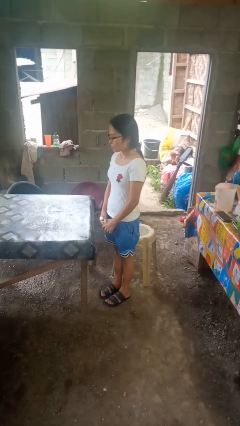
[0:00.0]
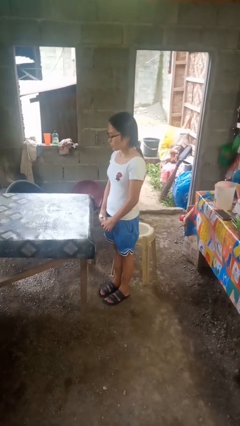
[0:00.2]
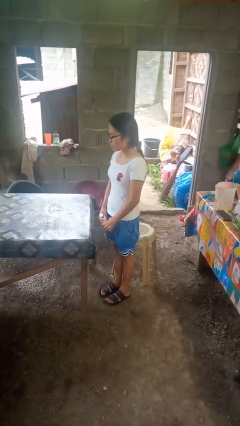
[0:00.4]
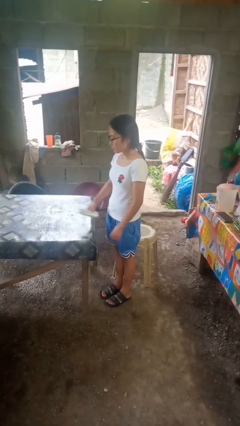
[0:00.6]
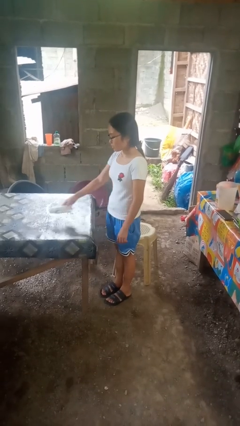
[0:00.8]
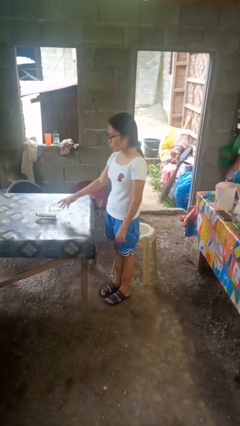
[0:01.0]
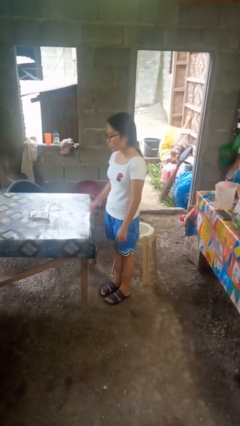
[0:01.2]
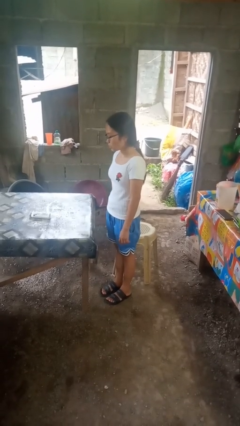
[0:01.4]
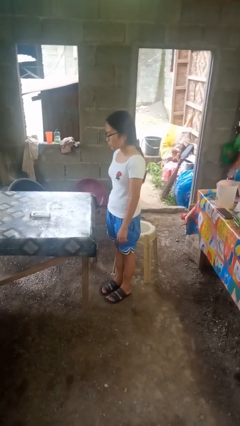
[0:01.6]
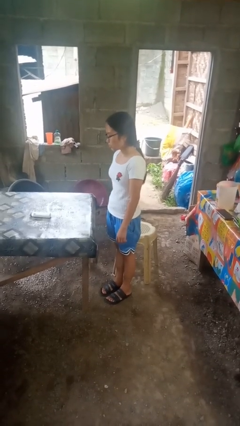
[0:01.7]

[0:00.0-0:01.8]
person throws object on table

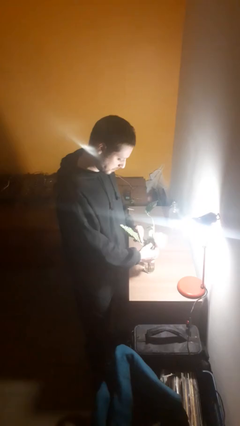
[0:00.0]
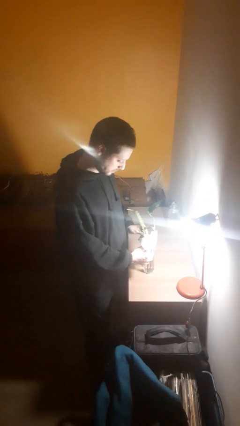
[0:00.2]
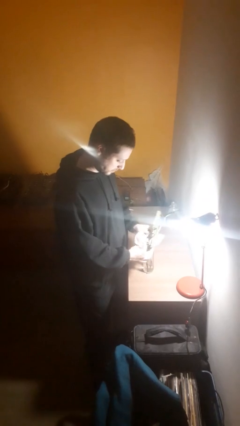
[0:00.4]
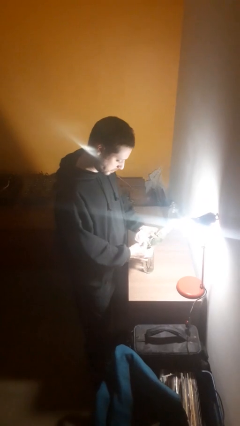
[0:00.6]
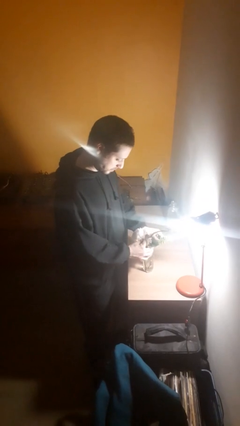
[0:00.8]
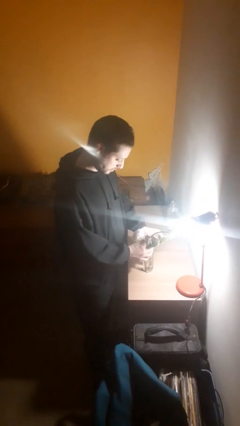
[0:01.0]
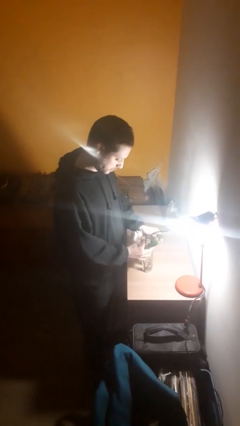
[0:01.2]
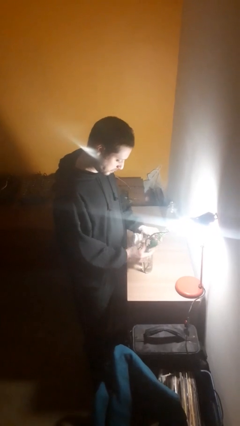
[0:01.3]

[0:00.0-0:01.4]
person arranges flowers in vase

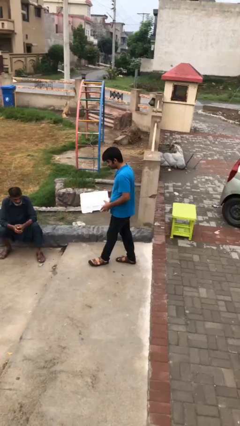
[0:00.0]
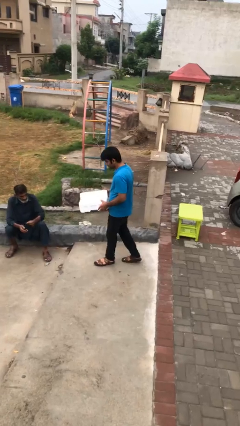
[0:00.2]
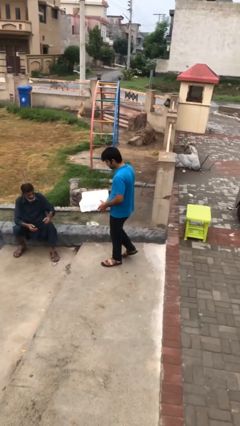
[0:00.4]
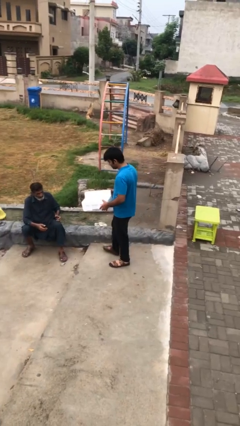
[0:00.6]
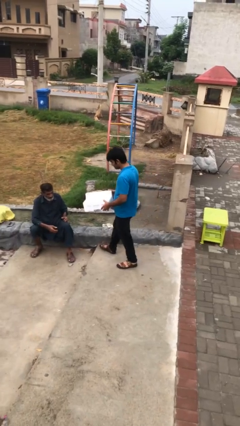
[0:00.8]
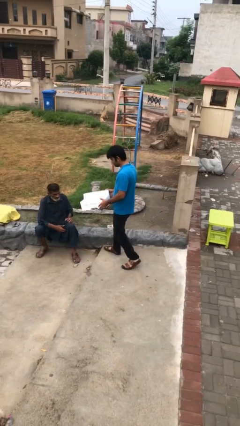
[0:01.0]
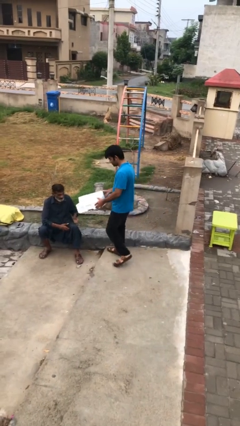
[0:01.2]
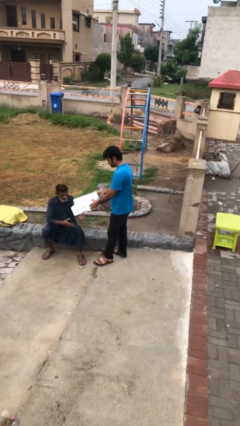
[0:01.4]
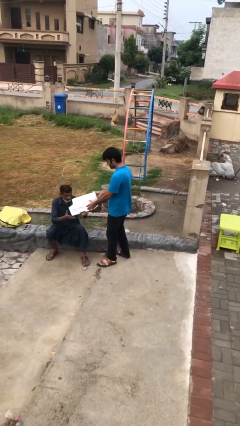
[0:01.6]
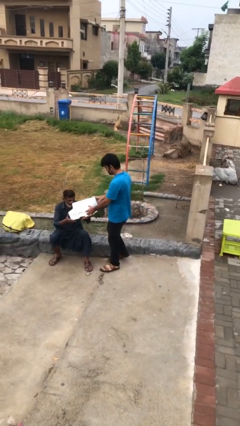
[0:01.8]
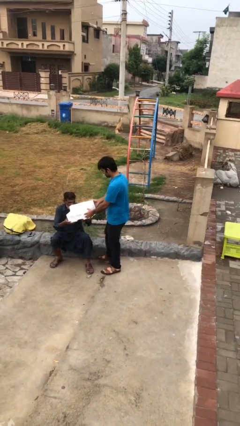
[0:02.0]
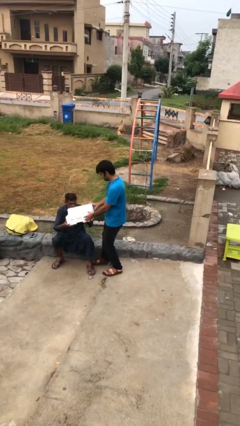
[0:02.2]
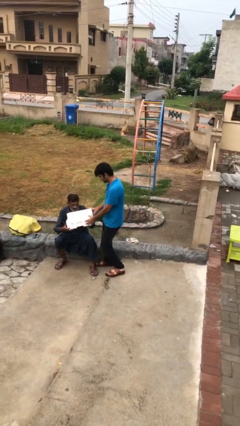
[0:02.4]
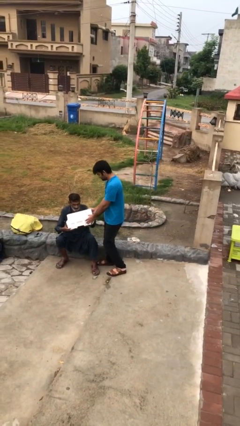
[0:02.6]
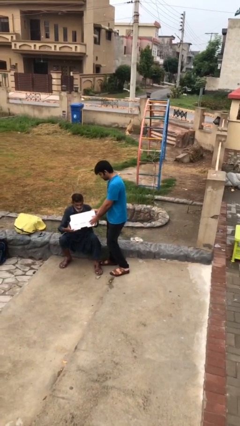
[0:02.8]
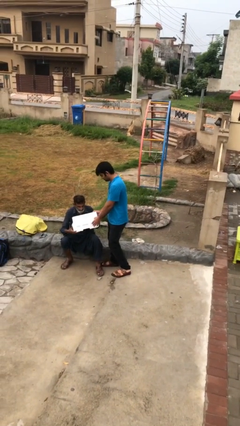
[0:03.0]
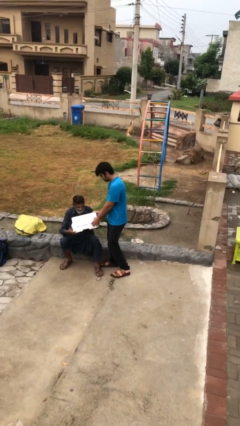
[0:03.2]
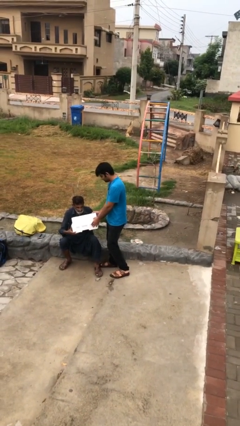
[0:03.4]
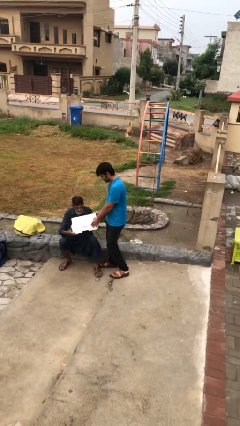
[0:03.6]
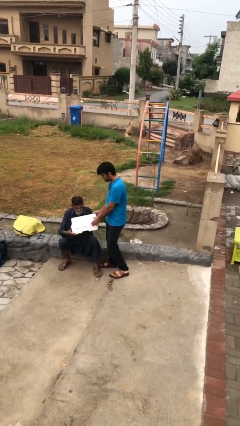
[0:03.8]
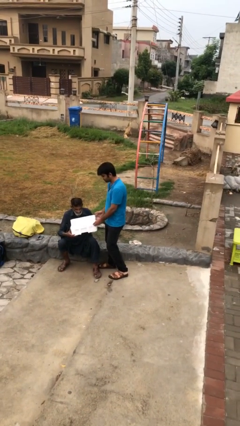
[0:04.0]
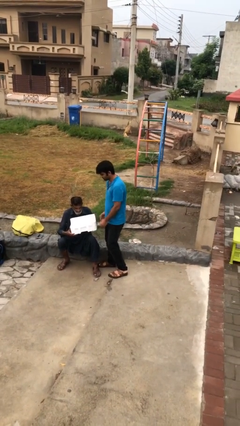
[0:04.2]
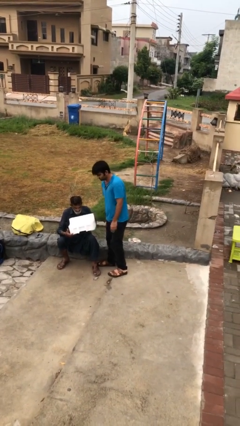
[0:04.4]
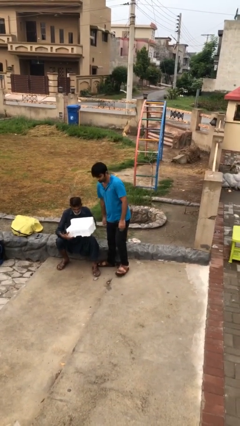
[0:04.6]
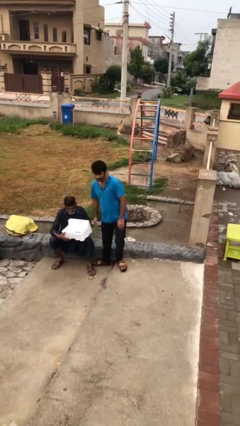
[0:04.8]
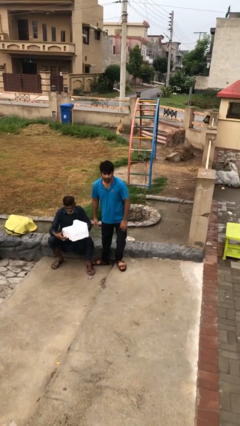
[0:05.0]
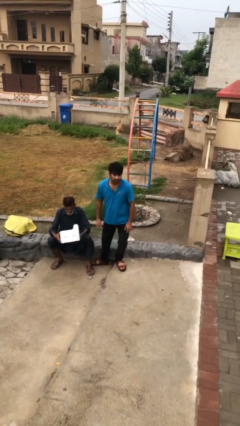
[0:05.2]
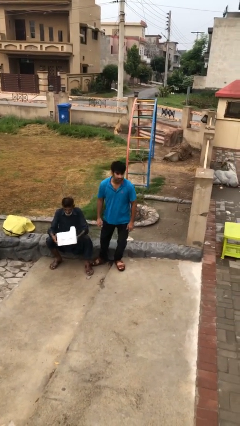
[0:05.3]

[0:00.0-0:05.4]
person transfers object to person

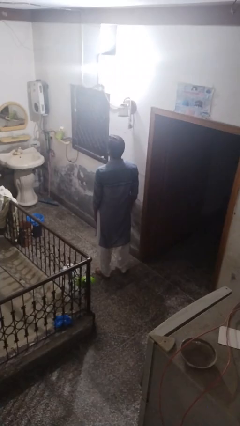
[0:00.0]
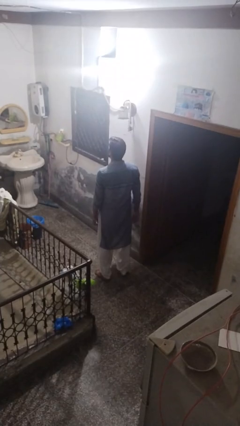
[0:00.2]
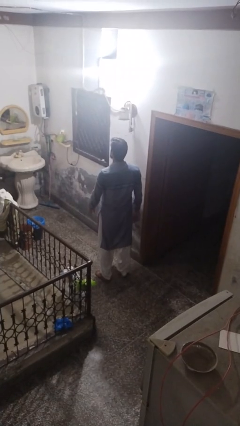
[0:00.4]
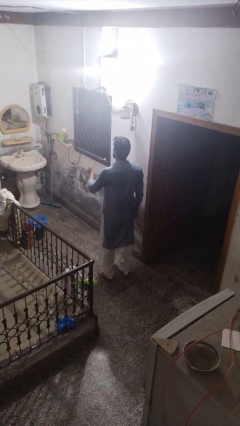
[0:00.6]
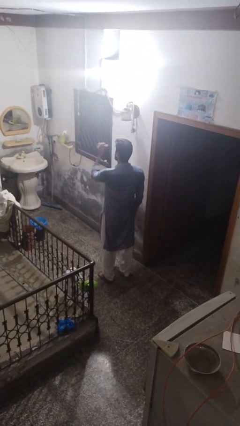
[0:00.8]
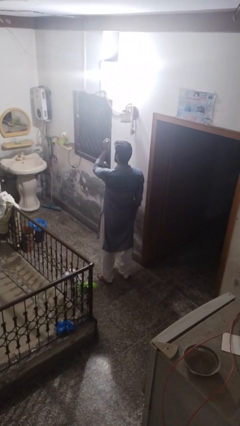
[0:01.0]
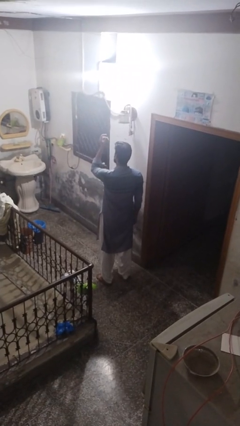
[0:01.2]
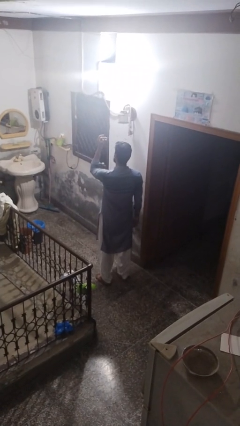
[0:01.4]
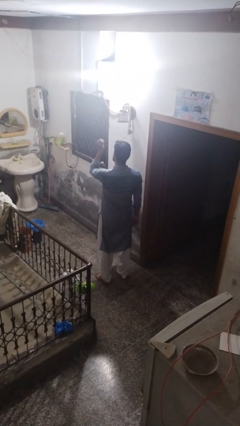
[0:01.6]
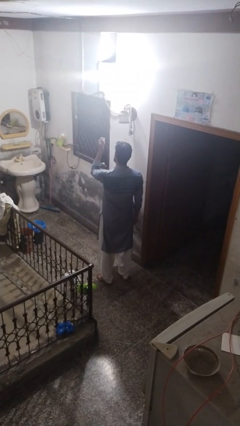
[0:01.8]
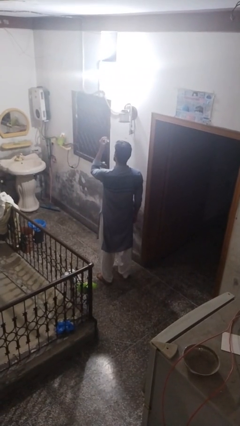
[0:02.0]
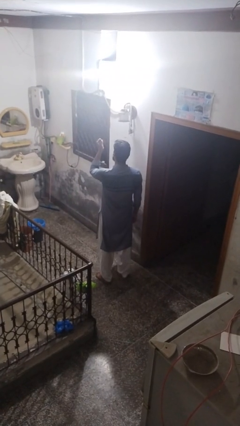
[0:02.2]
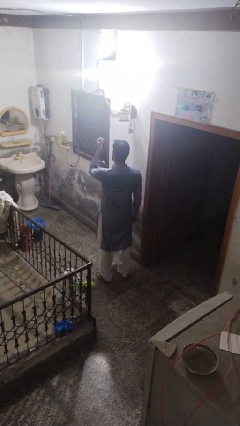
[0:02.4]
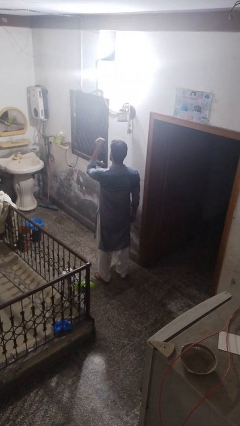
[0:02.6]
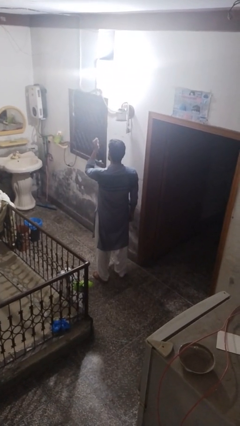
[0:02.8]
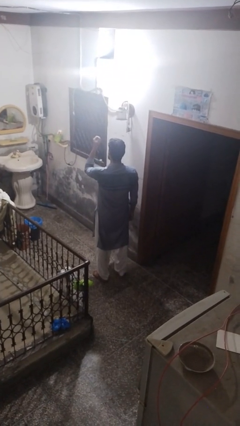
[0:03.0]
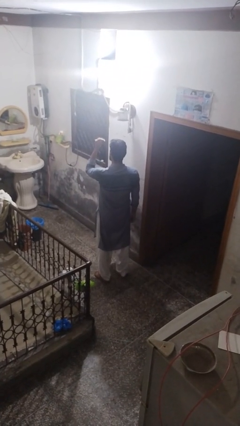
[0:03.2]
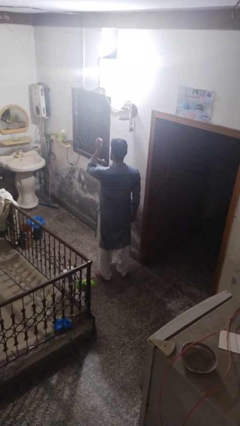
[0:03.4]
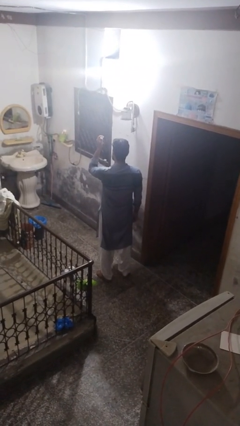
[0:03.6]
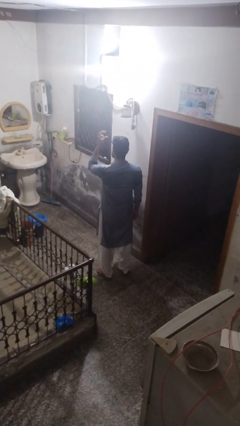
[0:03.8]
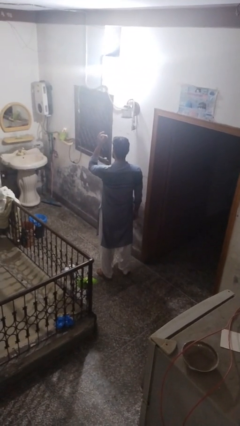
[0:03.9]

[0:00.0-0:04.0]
person snaps fingers

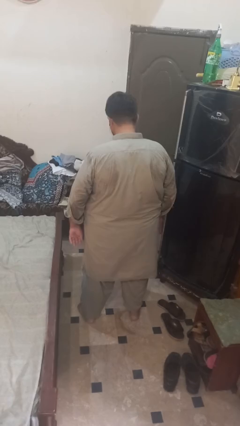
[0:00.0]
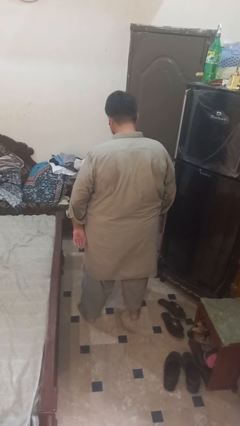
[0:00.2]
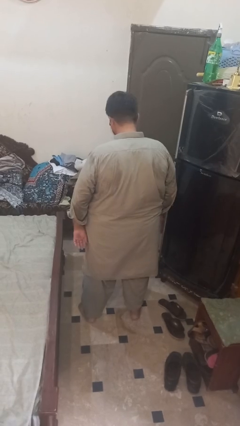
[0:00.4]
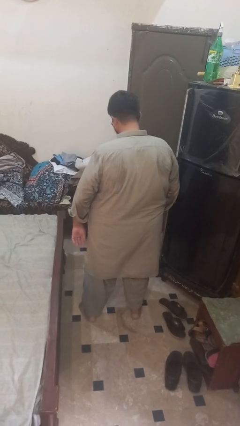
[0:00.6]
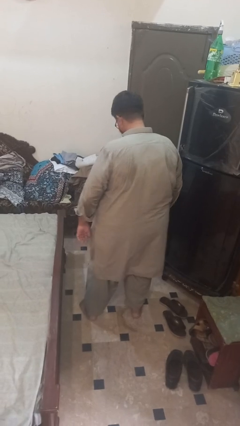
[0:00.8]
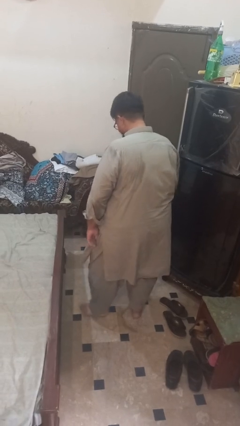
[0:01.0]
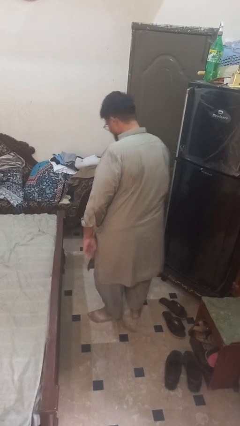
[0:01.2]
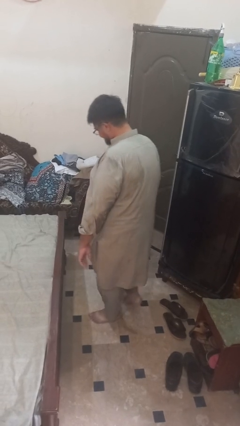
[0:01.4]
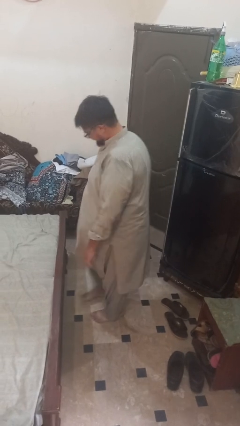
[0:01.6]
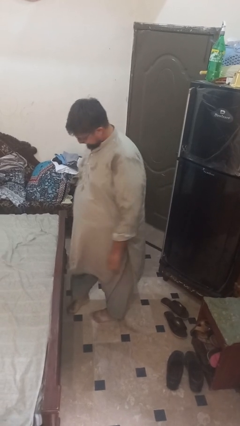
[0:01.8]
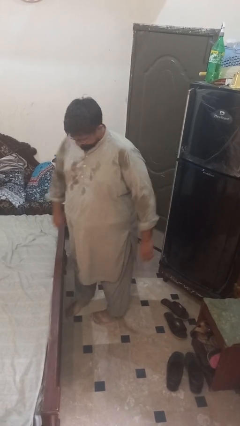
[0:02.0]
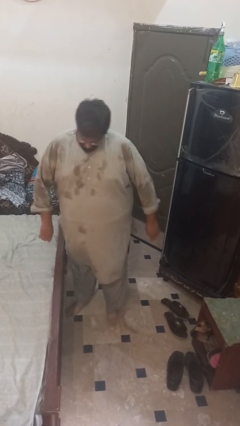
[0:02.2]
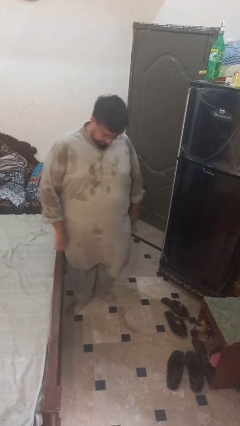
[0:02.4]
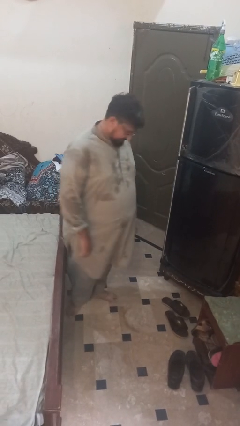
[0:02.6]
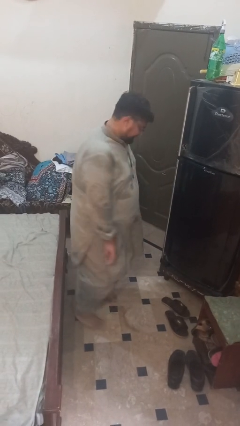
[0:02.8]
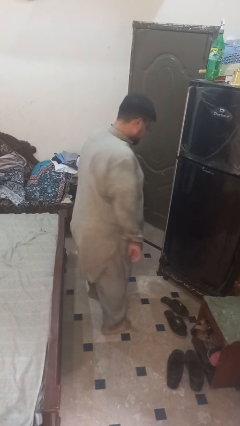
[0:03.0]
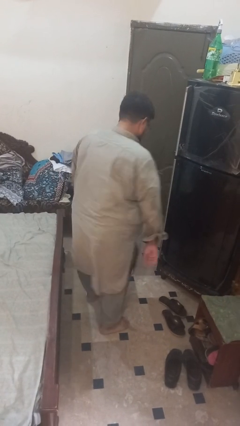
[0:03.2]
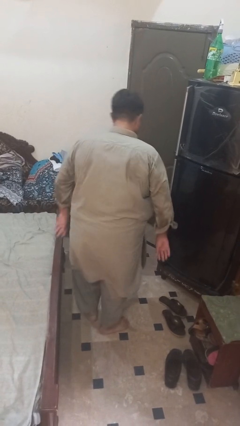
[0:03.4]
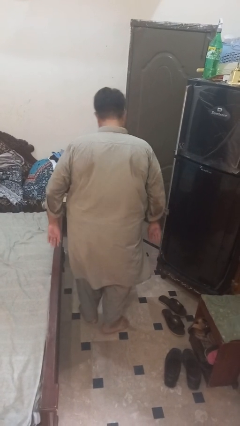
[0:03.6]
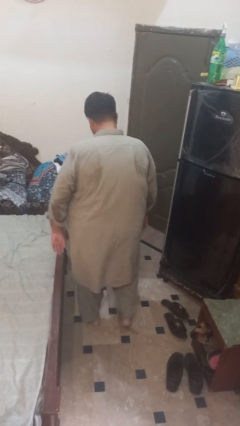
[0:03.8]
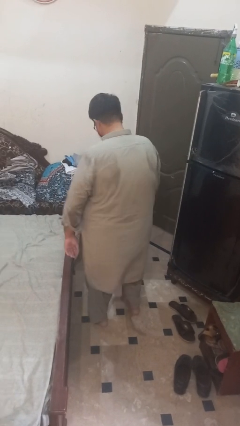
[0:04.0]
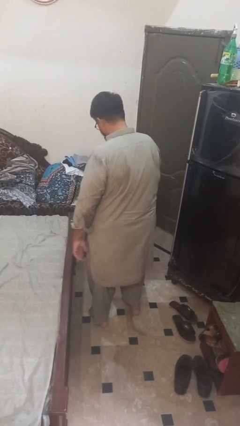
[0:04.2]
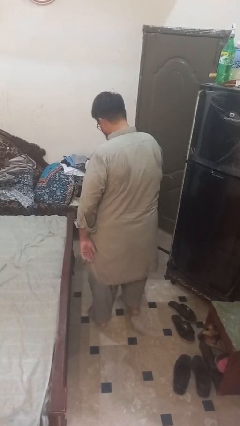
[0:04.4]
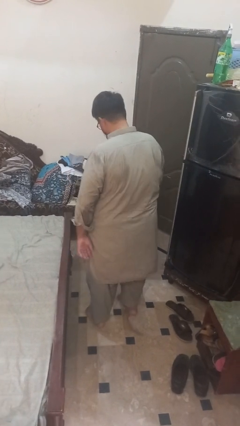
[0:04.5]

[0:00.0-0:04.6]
person twirls

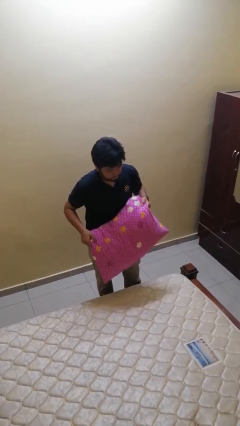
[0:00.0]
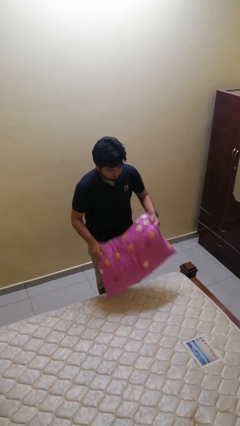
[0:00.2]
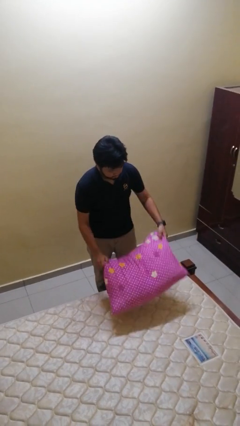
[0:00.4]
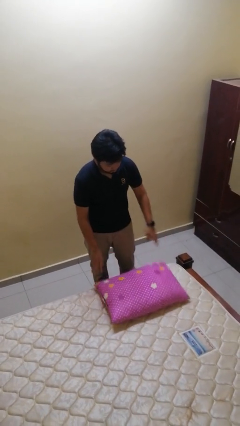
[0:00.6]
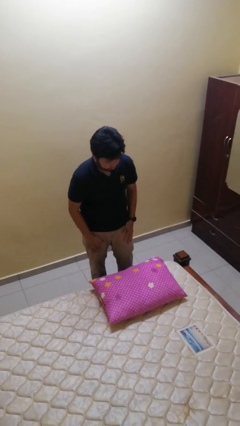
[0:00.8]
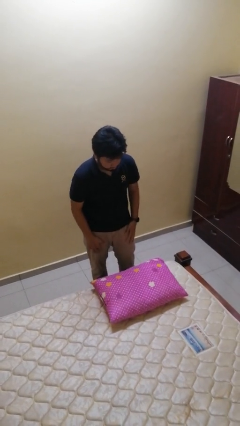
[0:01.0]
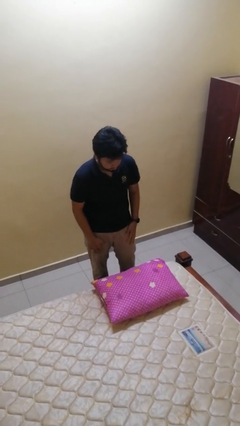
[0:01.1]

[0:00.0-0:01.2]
person puts down object on bed
